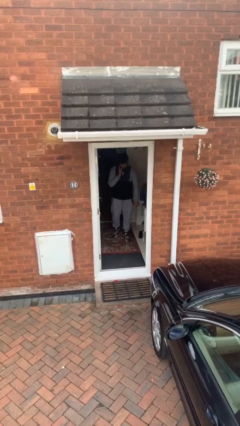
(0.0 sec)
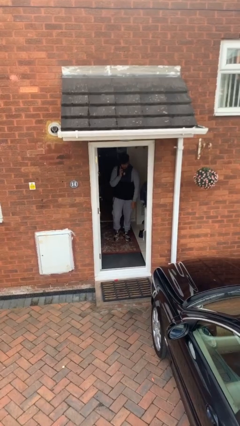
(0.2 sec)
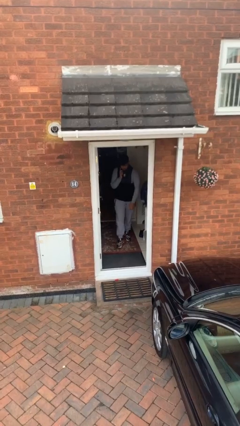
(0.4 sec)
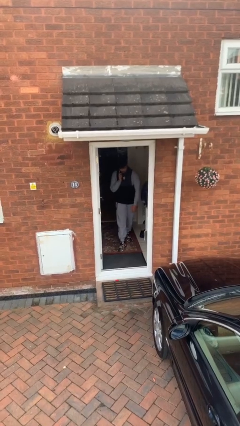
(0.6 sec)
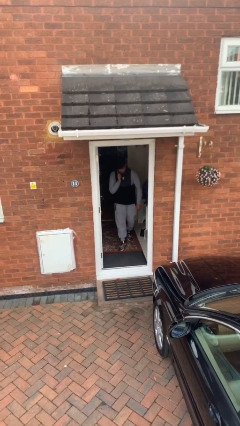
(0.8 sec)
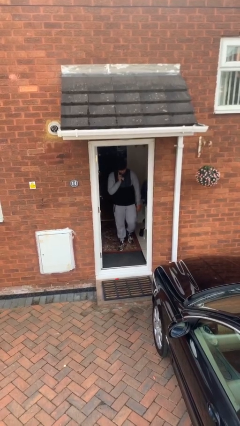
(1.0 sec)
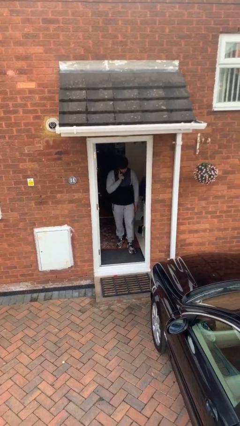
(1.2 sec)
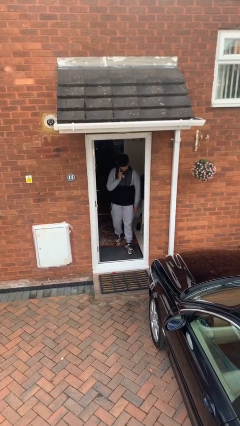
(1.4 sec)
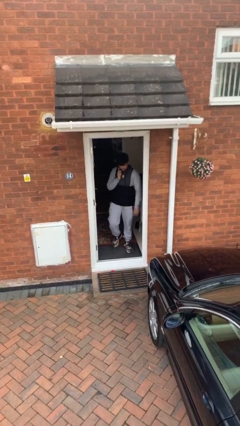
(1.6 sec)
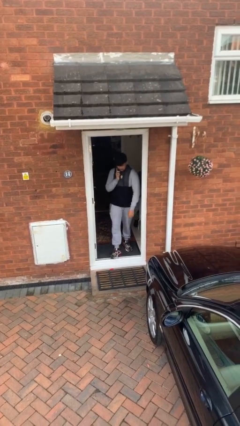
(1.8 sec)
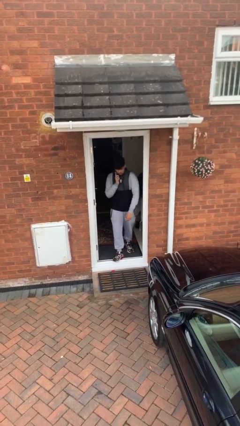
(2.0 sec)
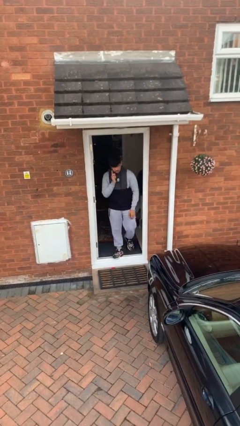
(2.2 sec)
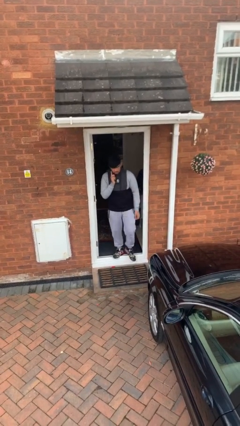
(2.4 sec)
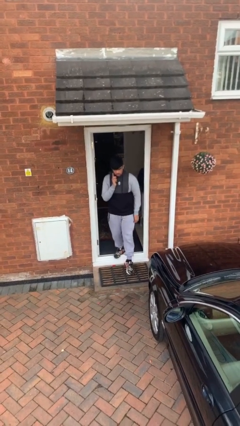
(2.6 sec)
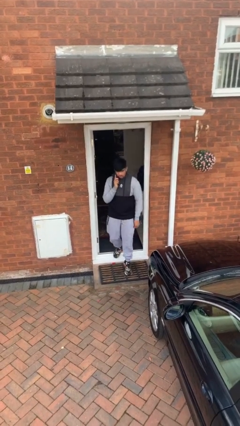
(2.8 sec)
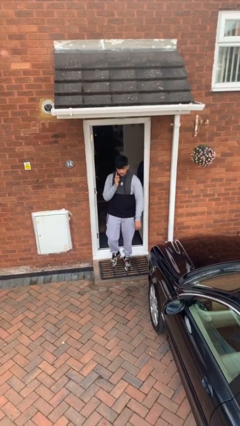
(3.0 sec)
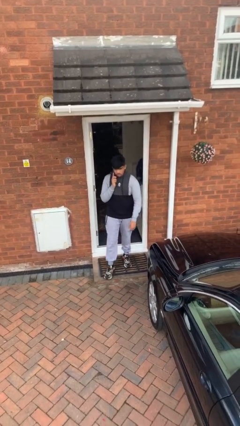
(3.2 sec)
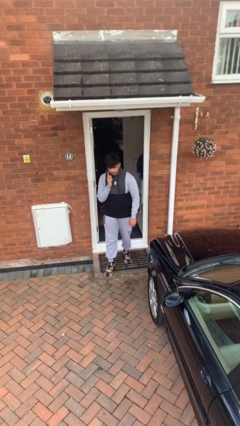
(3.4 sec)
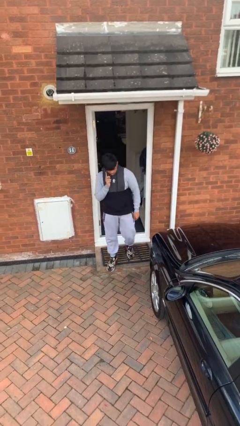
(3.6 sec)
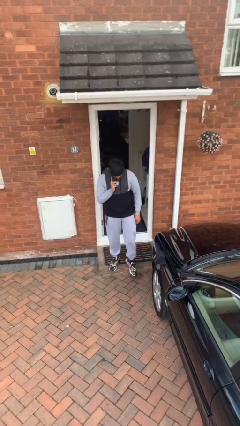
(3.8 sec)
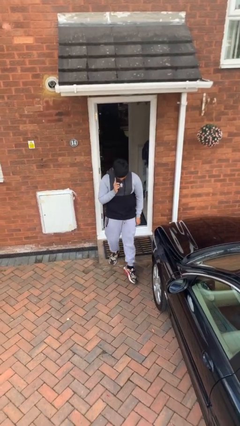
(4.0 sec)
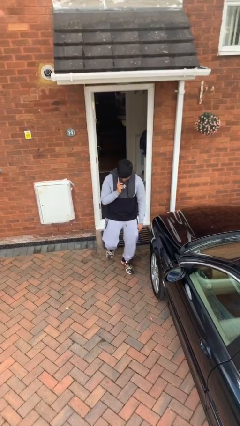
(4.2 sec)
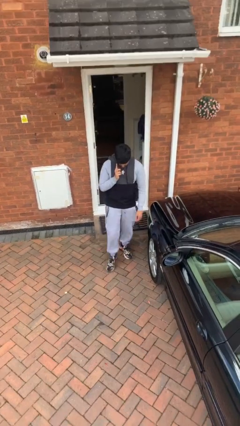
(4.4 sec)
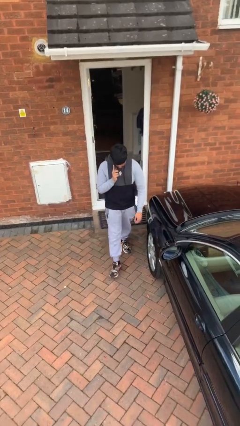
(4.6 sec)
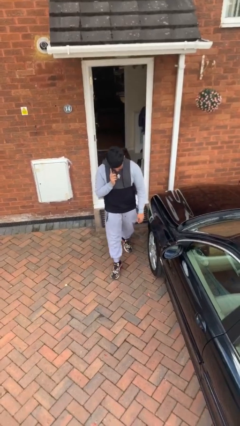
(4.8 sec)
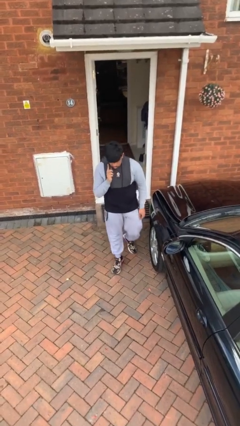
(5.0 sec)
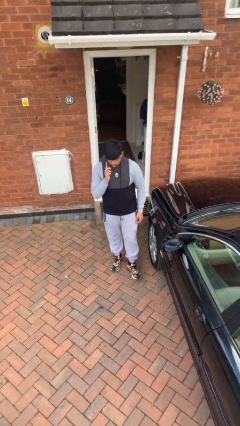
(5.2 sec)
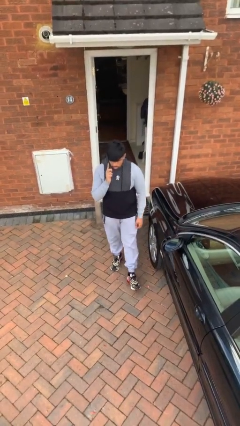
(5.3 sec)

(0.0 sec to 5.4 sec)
person enters scene through structure

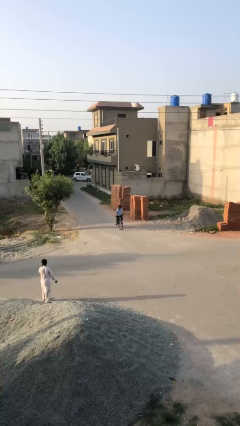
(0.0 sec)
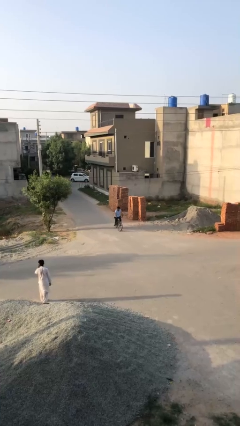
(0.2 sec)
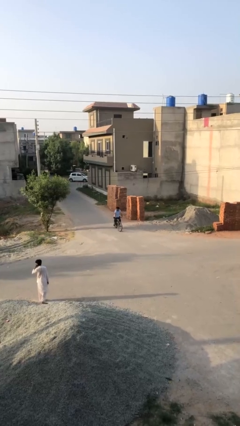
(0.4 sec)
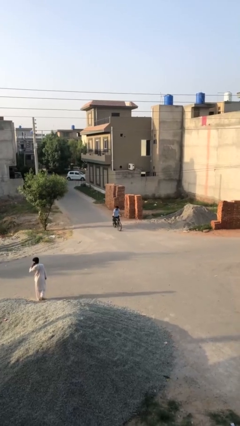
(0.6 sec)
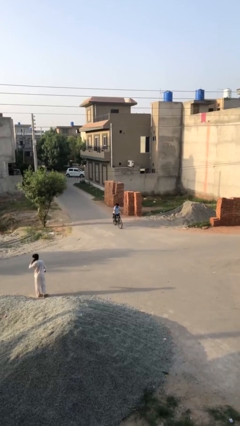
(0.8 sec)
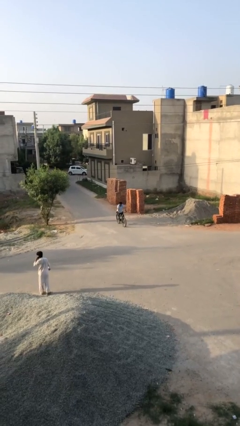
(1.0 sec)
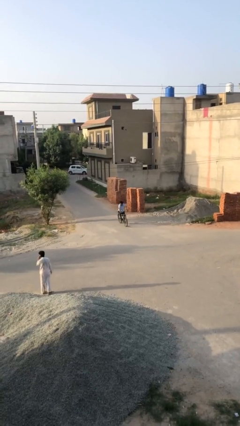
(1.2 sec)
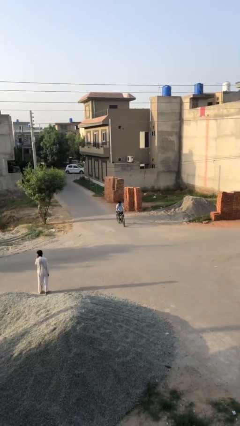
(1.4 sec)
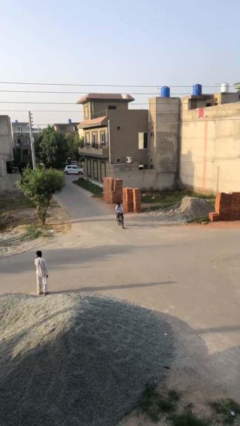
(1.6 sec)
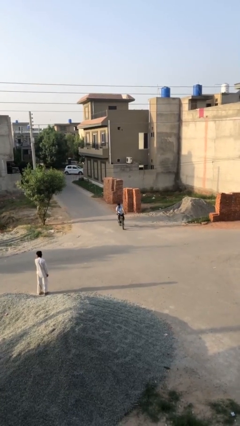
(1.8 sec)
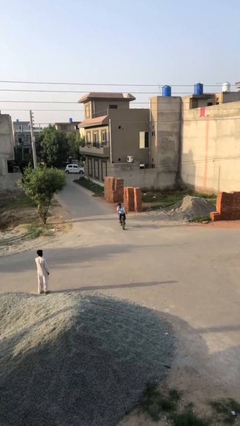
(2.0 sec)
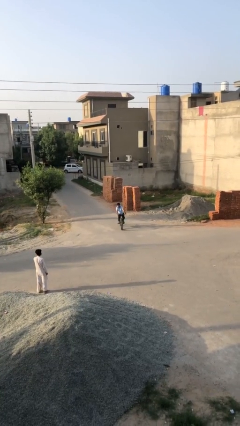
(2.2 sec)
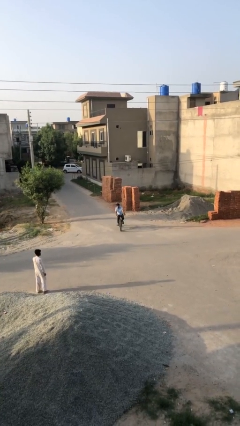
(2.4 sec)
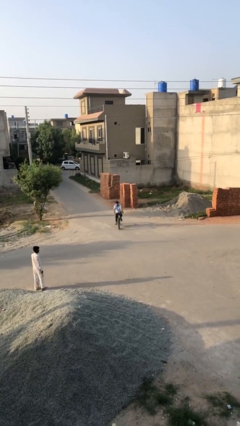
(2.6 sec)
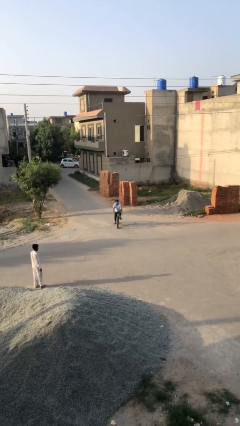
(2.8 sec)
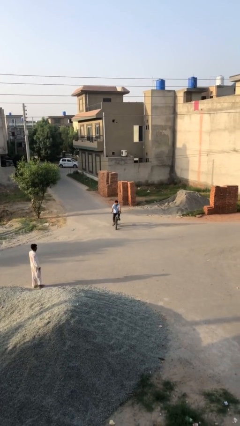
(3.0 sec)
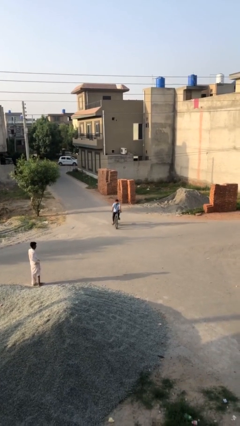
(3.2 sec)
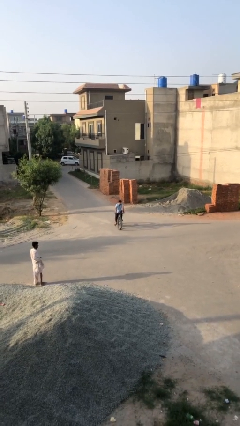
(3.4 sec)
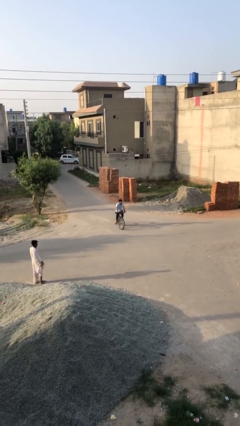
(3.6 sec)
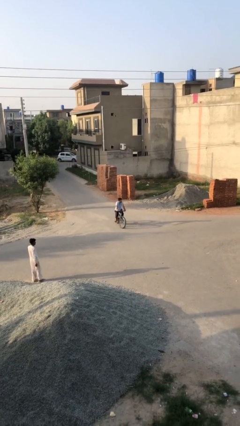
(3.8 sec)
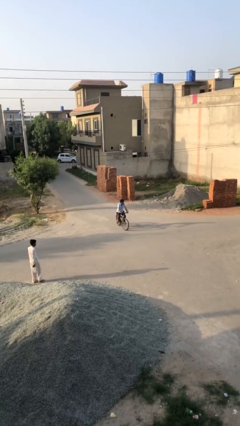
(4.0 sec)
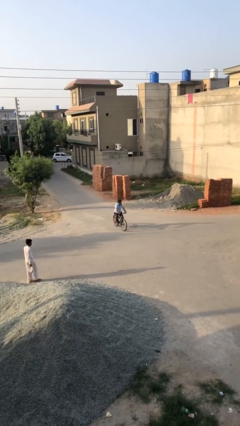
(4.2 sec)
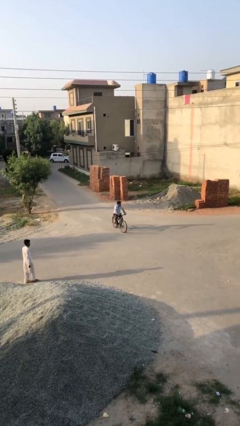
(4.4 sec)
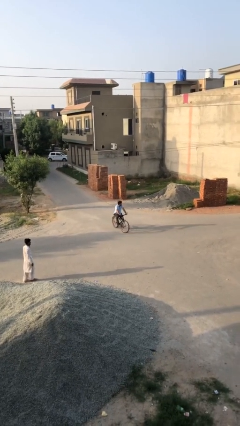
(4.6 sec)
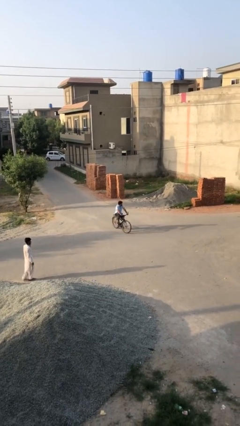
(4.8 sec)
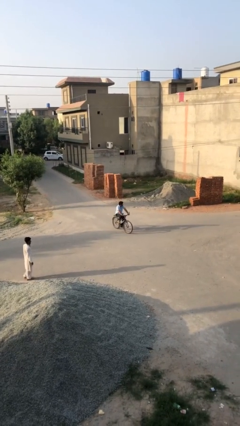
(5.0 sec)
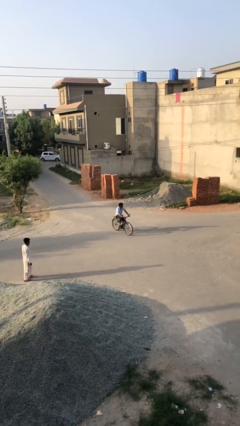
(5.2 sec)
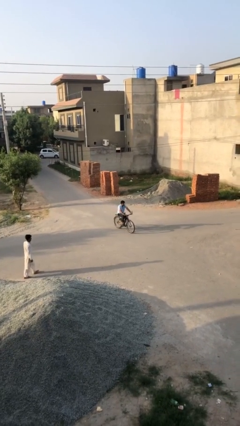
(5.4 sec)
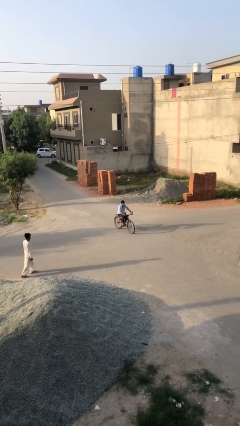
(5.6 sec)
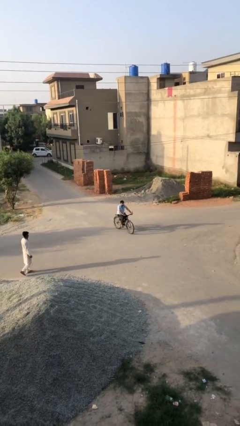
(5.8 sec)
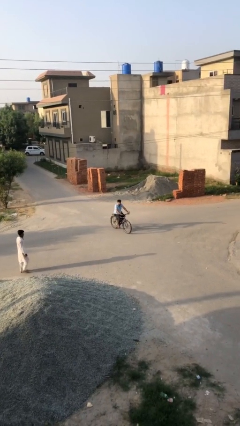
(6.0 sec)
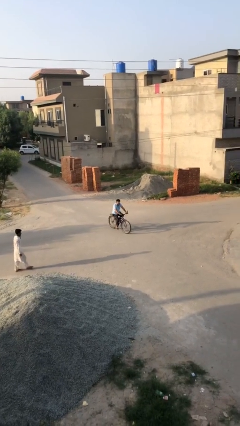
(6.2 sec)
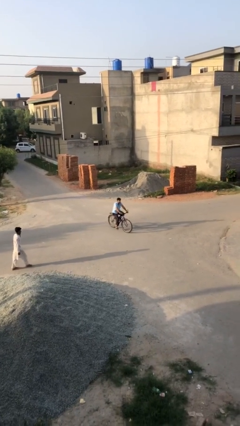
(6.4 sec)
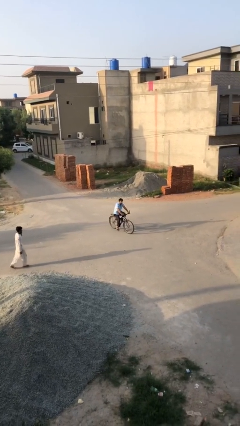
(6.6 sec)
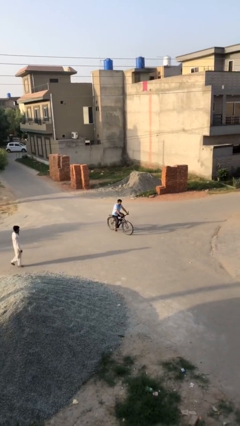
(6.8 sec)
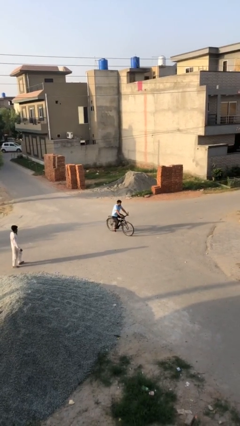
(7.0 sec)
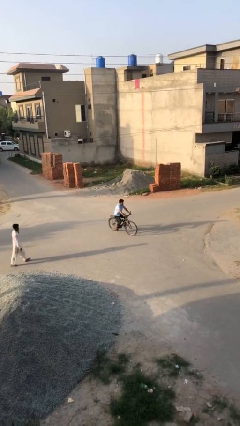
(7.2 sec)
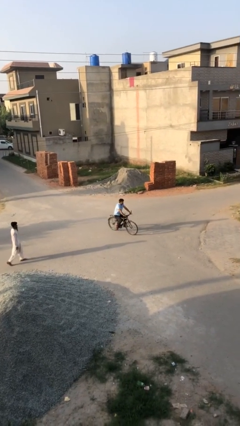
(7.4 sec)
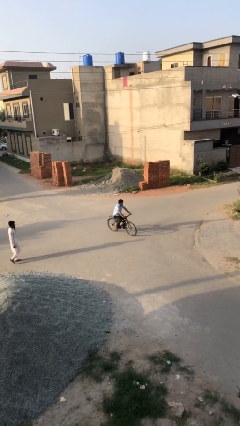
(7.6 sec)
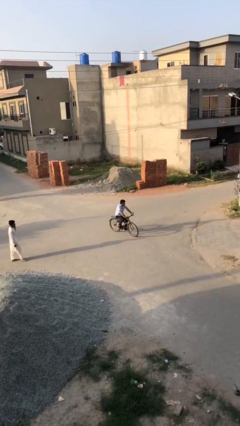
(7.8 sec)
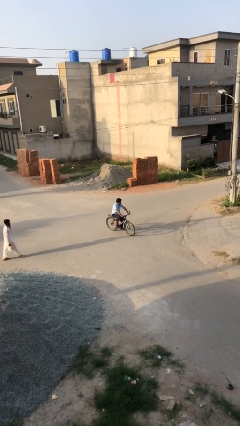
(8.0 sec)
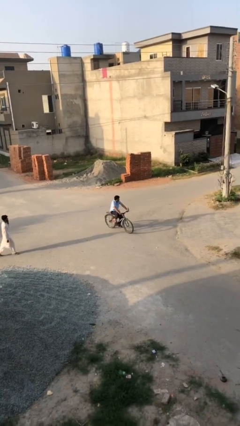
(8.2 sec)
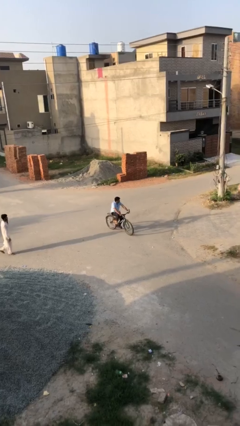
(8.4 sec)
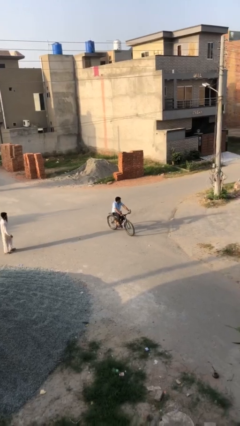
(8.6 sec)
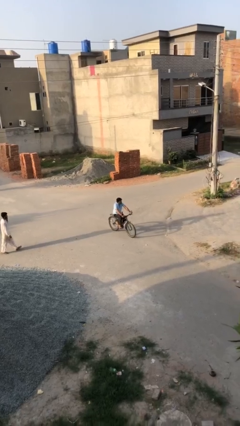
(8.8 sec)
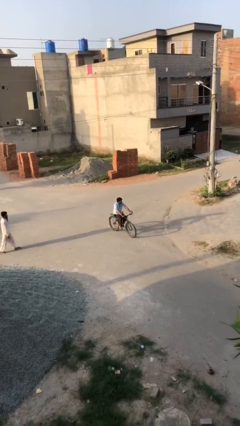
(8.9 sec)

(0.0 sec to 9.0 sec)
person rides bicycle

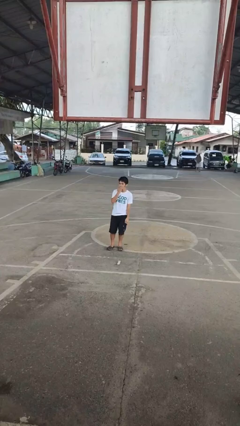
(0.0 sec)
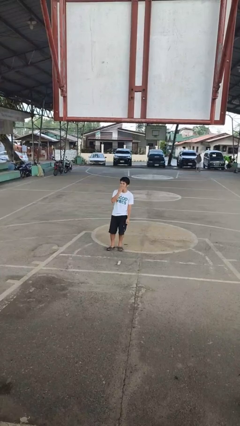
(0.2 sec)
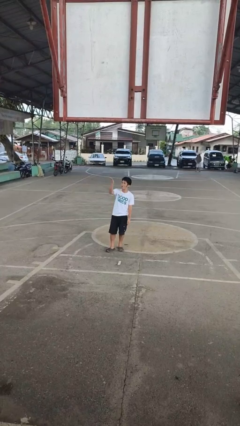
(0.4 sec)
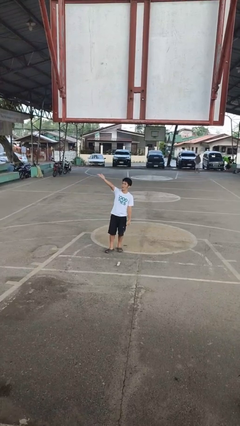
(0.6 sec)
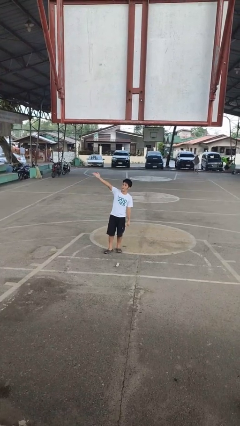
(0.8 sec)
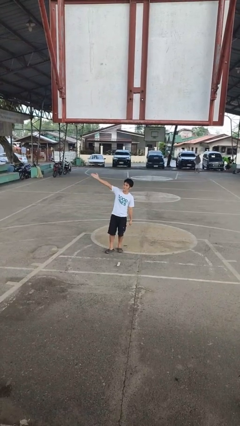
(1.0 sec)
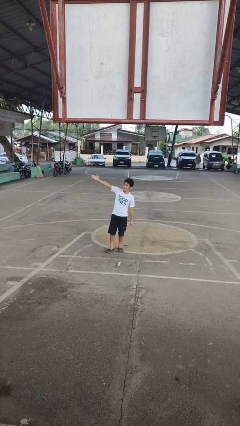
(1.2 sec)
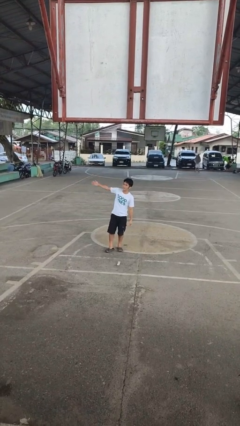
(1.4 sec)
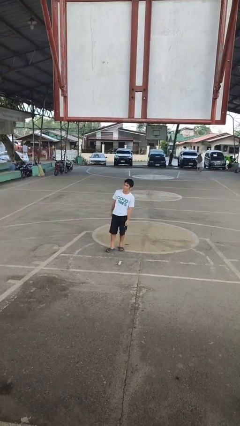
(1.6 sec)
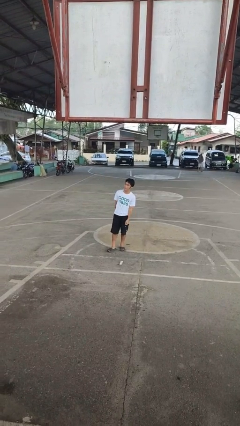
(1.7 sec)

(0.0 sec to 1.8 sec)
person gestures blow kiss

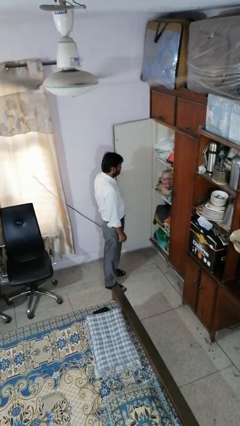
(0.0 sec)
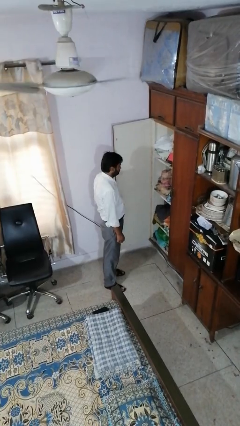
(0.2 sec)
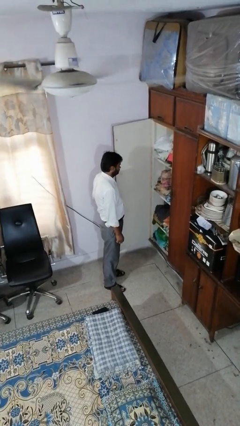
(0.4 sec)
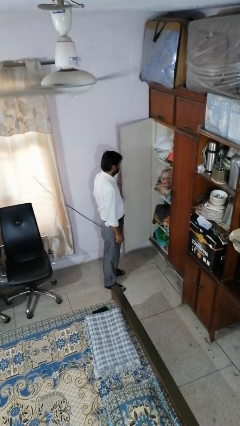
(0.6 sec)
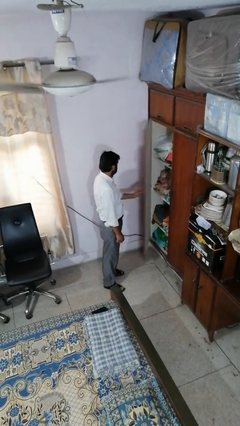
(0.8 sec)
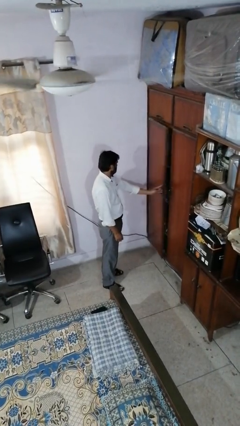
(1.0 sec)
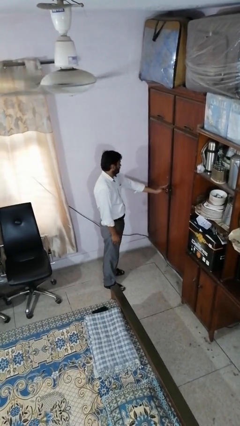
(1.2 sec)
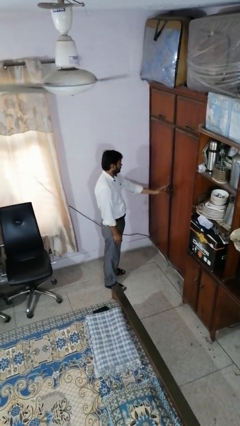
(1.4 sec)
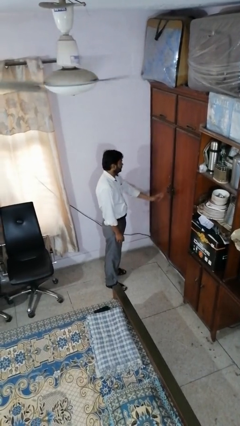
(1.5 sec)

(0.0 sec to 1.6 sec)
person closes closet door
